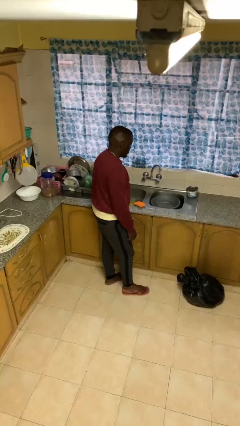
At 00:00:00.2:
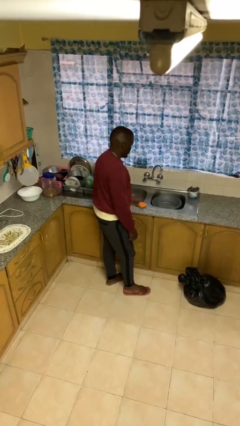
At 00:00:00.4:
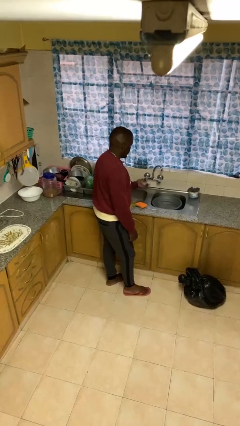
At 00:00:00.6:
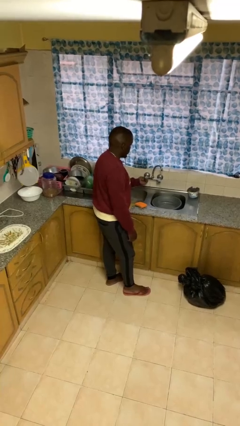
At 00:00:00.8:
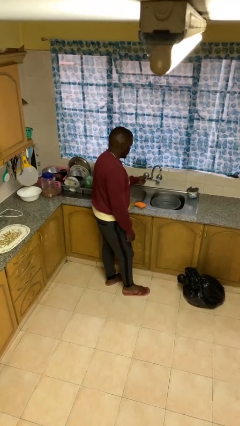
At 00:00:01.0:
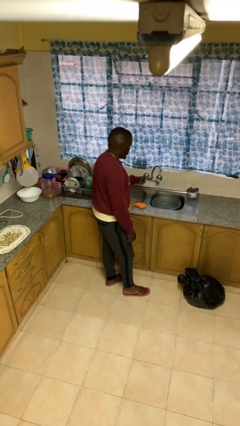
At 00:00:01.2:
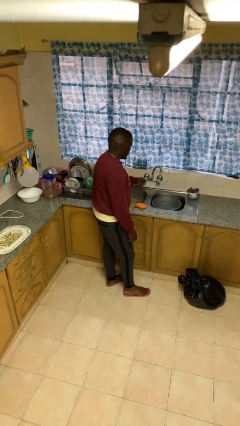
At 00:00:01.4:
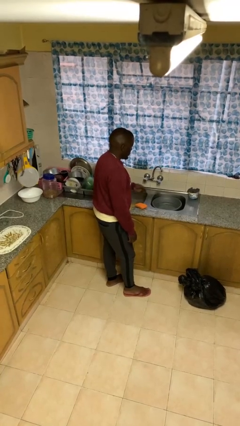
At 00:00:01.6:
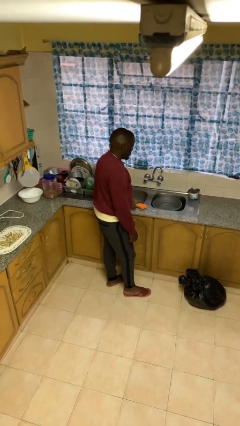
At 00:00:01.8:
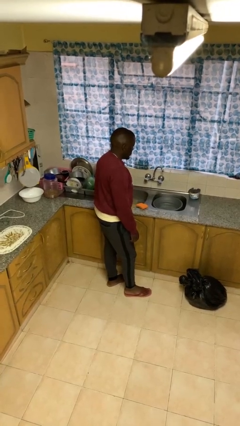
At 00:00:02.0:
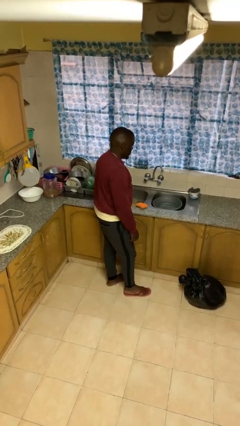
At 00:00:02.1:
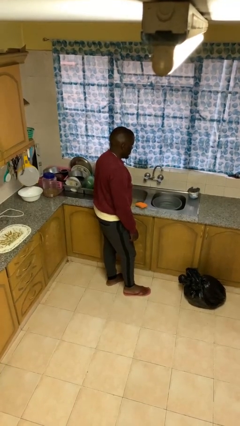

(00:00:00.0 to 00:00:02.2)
person turns off faucet

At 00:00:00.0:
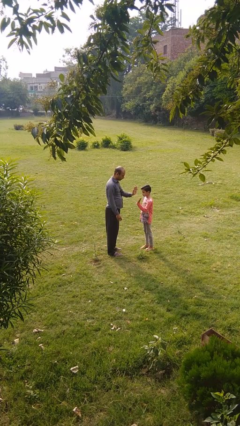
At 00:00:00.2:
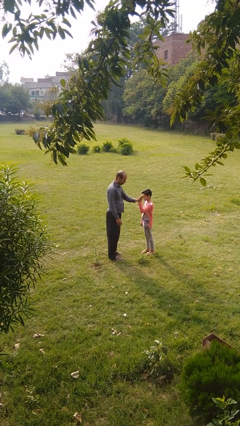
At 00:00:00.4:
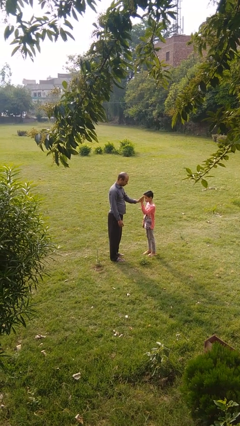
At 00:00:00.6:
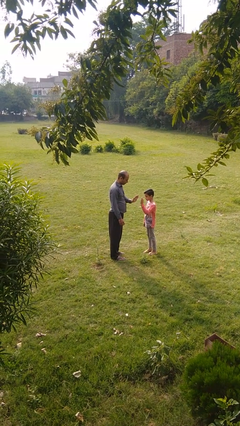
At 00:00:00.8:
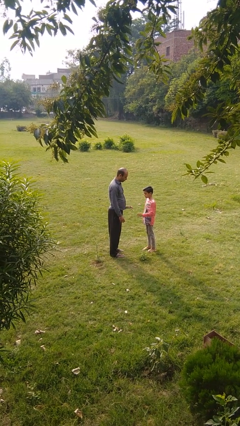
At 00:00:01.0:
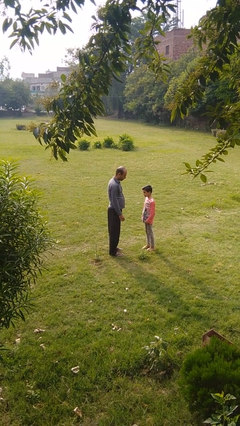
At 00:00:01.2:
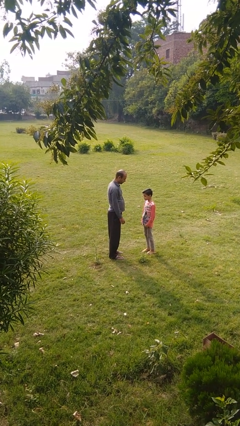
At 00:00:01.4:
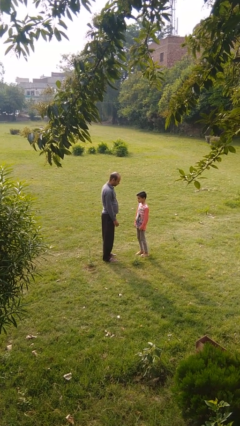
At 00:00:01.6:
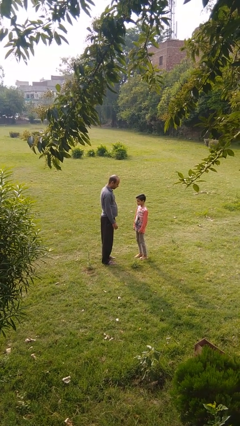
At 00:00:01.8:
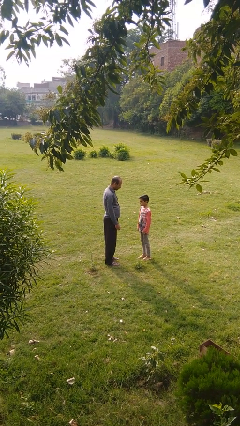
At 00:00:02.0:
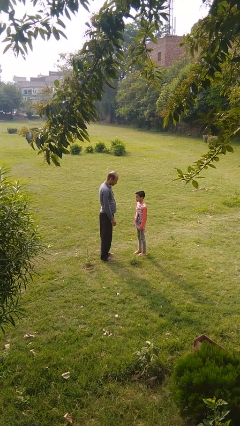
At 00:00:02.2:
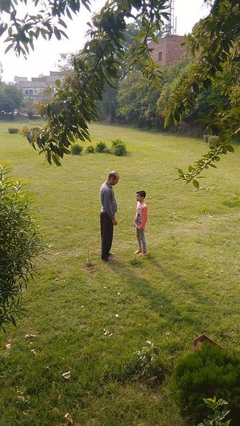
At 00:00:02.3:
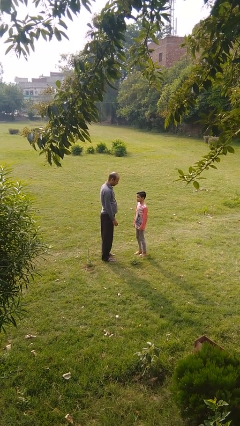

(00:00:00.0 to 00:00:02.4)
person highfives hand

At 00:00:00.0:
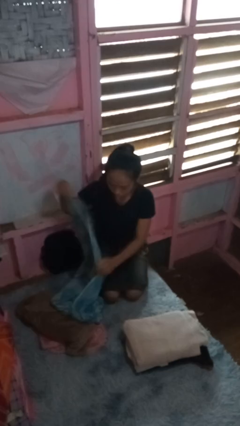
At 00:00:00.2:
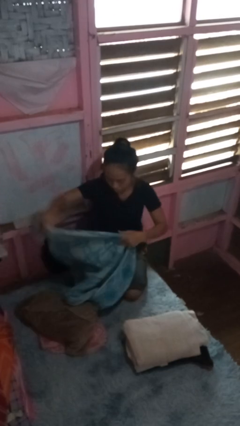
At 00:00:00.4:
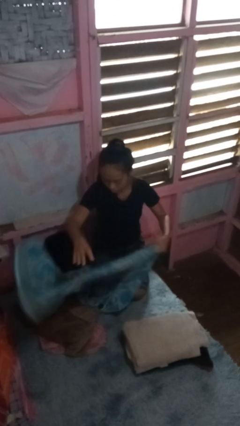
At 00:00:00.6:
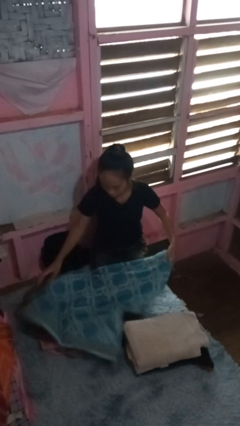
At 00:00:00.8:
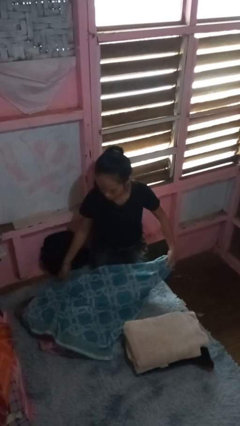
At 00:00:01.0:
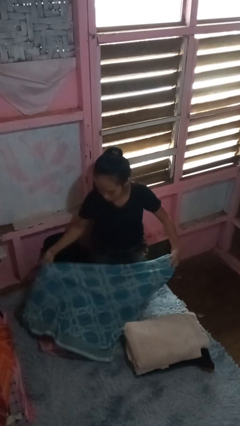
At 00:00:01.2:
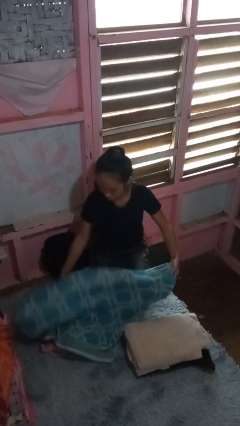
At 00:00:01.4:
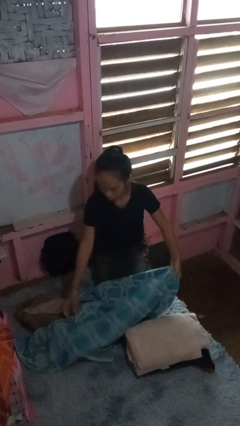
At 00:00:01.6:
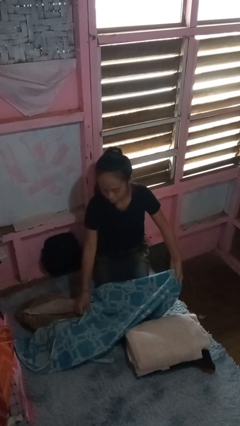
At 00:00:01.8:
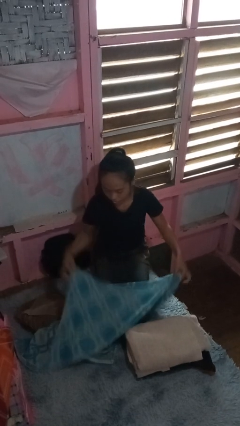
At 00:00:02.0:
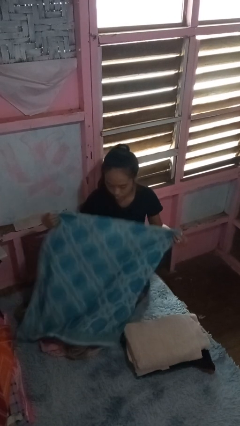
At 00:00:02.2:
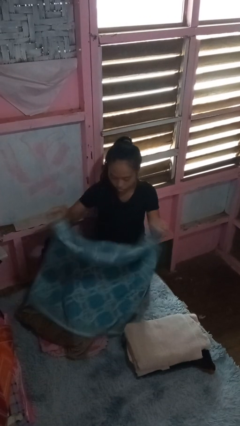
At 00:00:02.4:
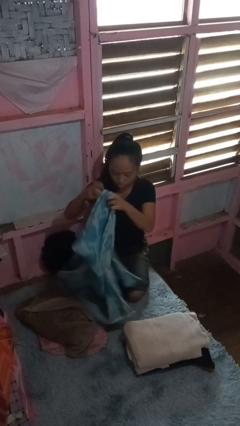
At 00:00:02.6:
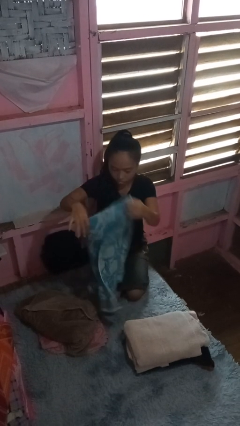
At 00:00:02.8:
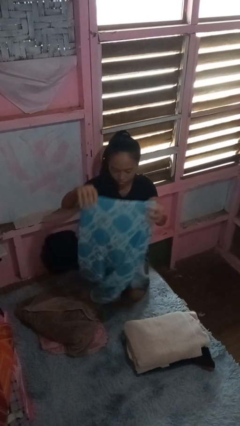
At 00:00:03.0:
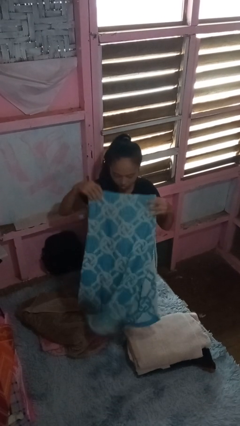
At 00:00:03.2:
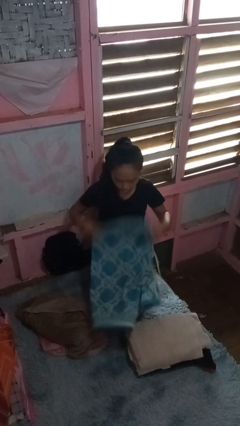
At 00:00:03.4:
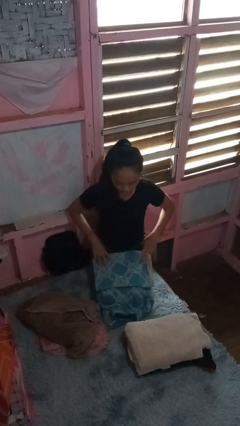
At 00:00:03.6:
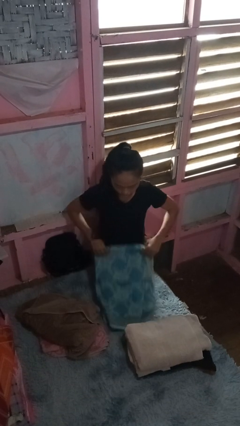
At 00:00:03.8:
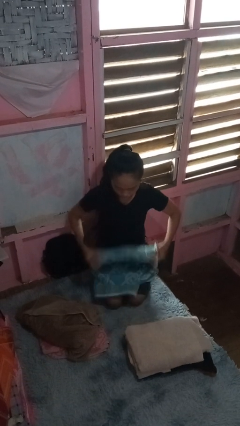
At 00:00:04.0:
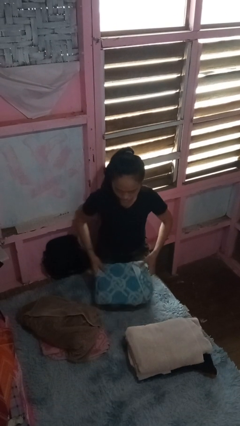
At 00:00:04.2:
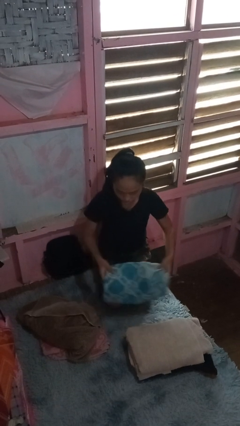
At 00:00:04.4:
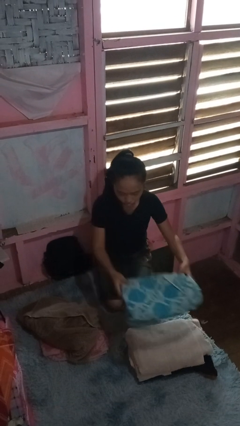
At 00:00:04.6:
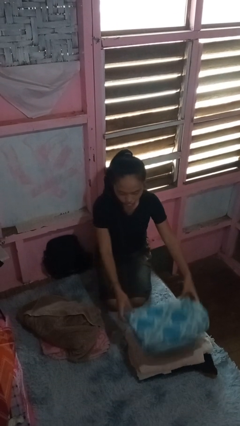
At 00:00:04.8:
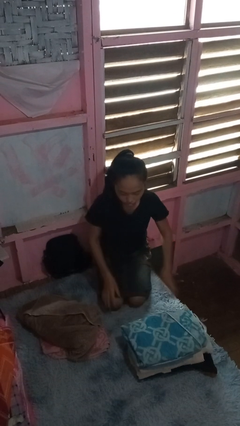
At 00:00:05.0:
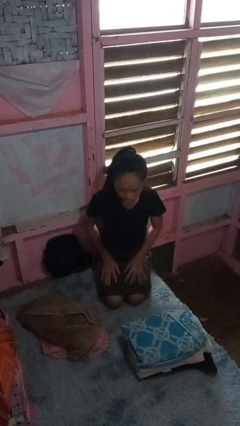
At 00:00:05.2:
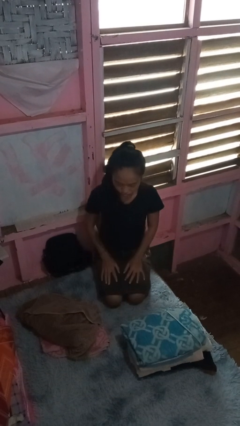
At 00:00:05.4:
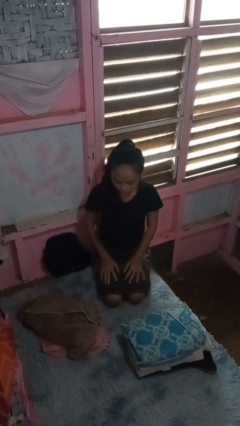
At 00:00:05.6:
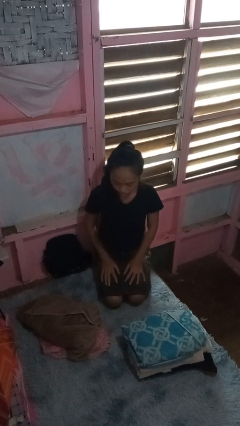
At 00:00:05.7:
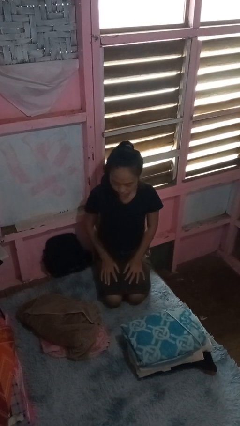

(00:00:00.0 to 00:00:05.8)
person folds towel

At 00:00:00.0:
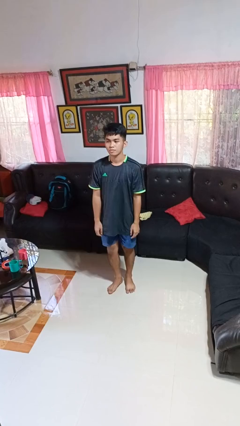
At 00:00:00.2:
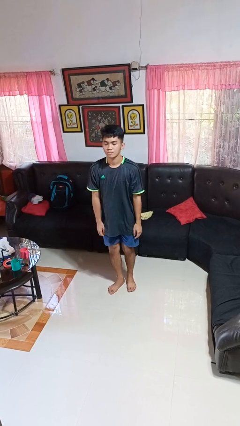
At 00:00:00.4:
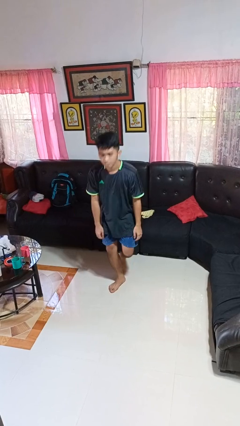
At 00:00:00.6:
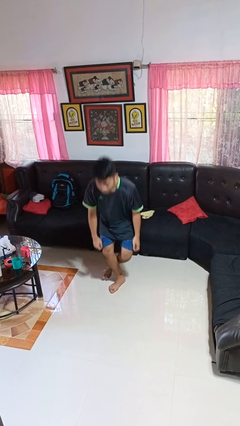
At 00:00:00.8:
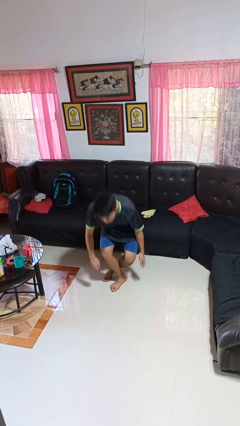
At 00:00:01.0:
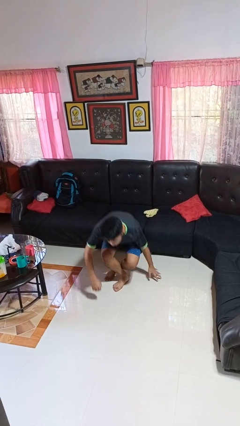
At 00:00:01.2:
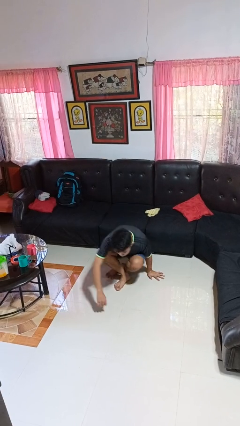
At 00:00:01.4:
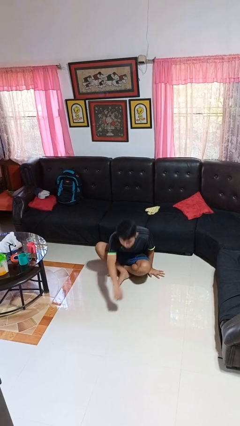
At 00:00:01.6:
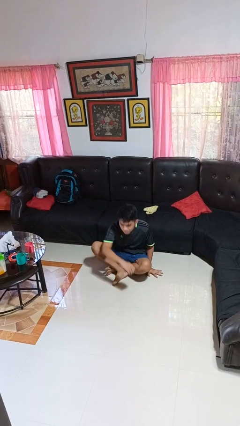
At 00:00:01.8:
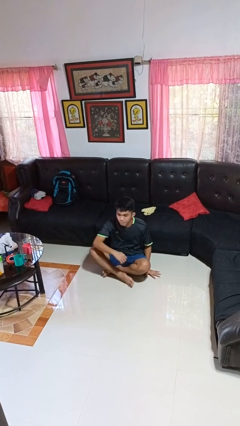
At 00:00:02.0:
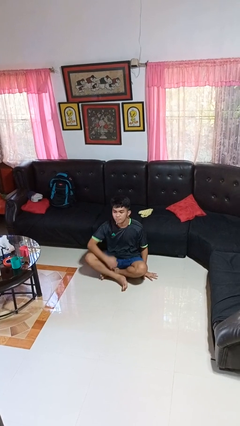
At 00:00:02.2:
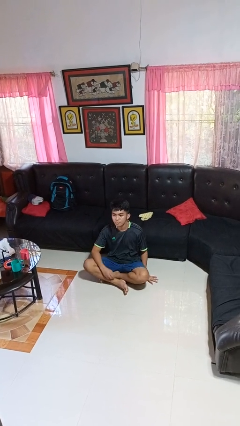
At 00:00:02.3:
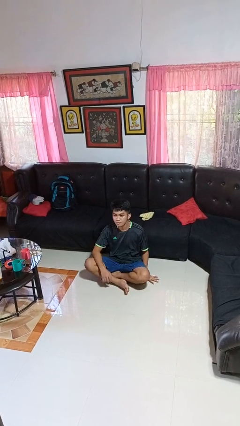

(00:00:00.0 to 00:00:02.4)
person sits crisscross

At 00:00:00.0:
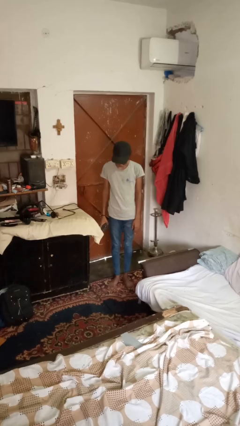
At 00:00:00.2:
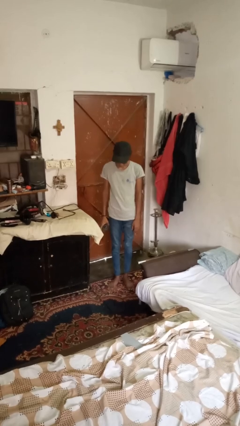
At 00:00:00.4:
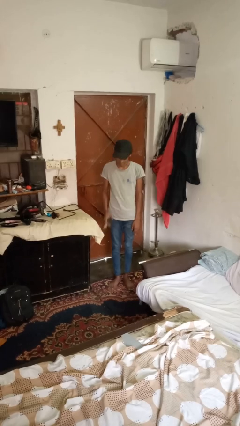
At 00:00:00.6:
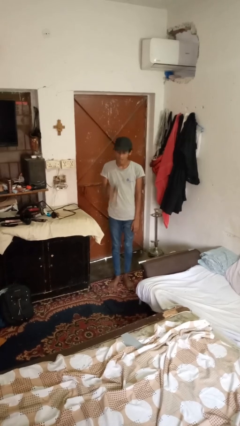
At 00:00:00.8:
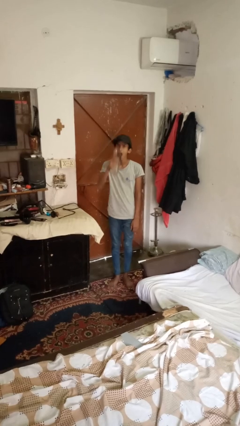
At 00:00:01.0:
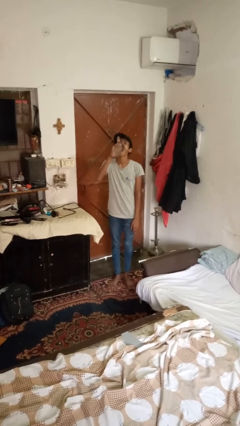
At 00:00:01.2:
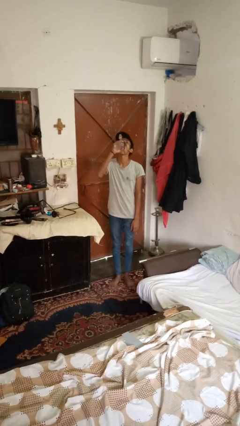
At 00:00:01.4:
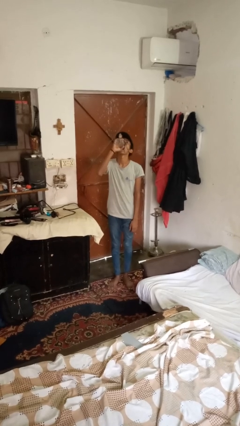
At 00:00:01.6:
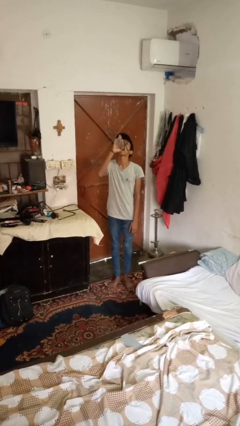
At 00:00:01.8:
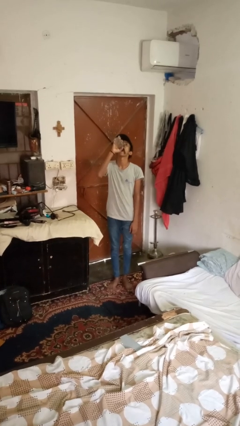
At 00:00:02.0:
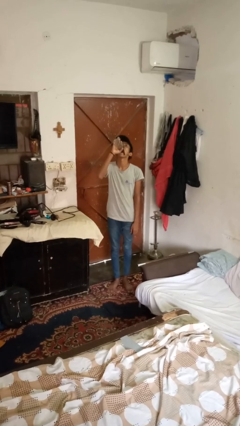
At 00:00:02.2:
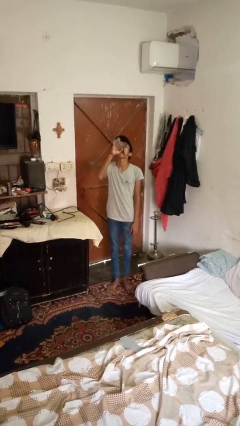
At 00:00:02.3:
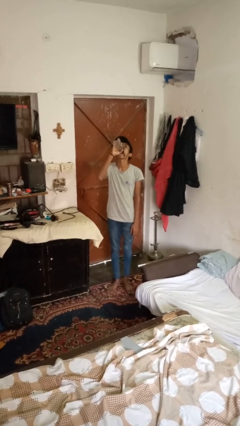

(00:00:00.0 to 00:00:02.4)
person drinks from bottle

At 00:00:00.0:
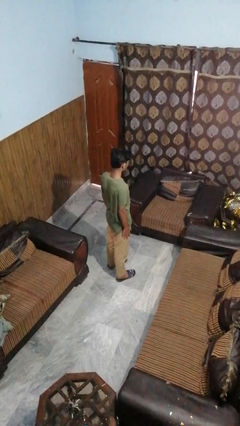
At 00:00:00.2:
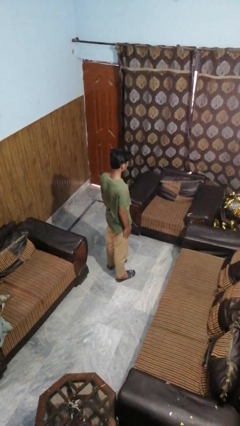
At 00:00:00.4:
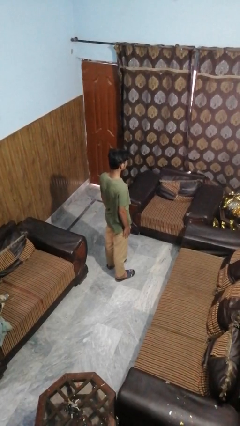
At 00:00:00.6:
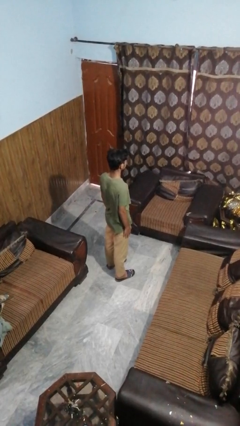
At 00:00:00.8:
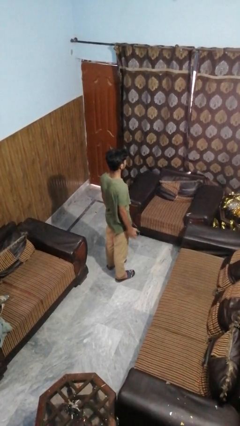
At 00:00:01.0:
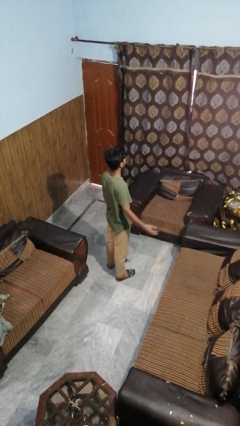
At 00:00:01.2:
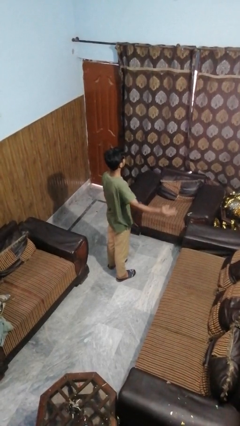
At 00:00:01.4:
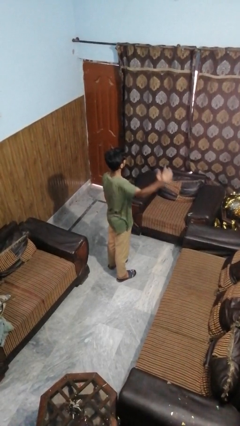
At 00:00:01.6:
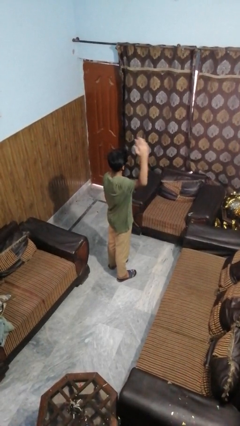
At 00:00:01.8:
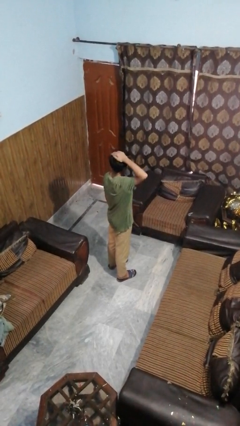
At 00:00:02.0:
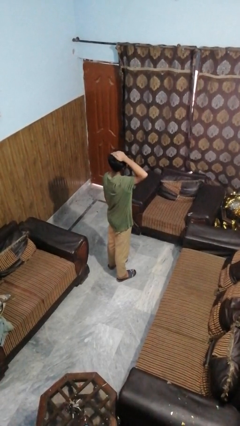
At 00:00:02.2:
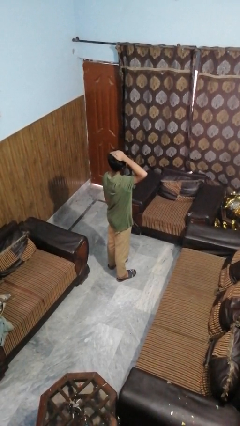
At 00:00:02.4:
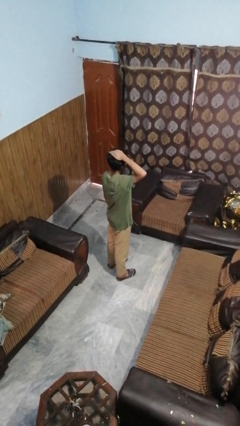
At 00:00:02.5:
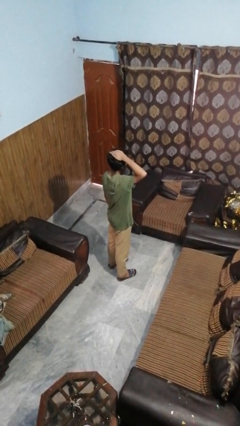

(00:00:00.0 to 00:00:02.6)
person pats head
